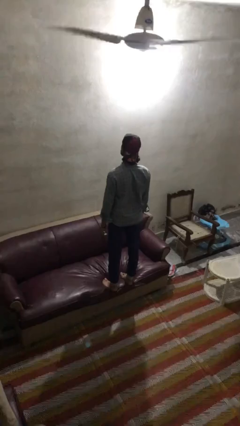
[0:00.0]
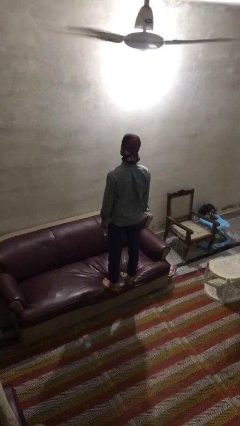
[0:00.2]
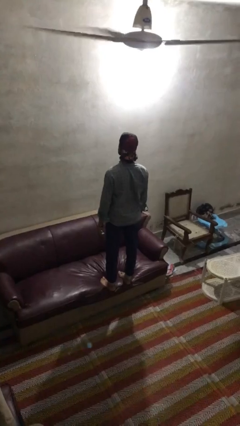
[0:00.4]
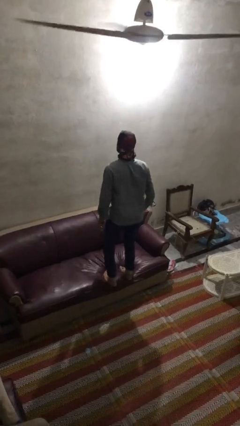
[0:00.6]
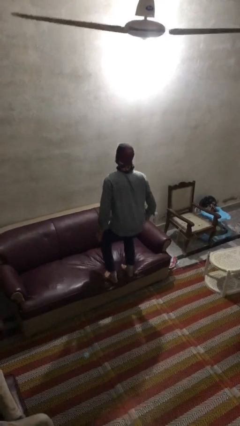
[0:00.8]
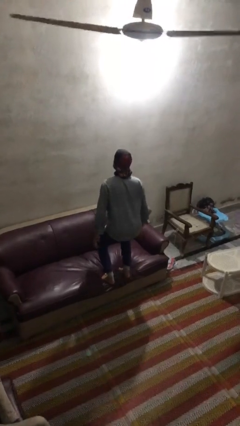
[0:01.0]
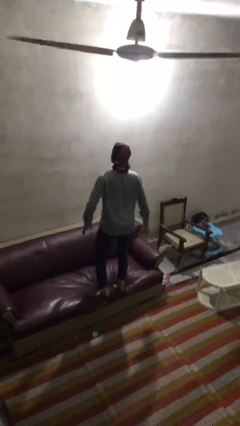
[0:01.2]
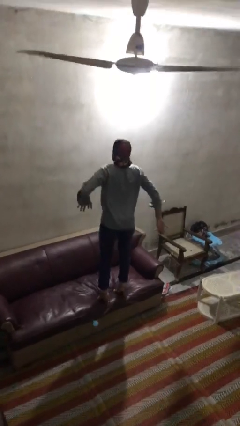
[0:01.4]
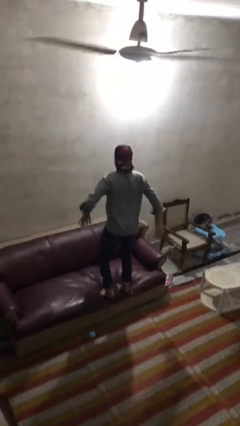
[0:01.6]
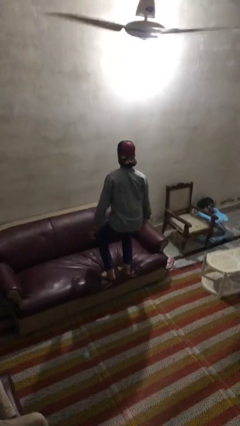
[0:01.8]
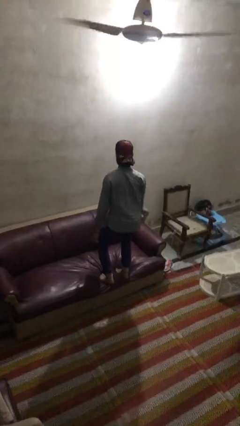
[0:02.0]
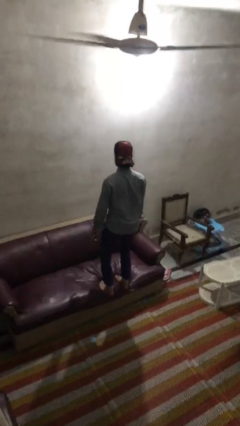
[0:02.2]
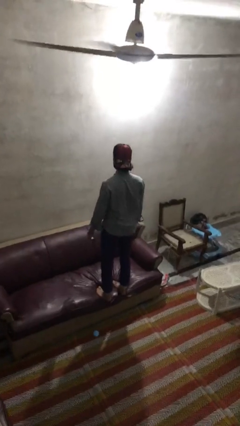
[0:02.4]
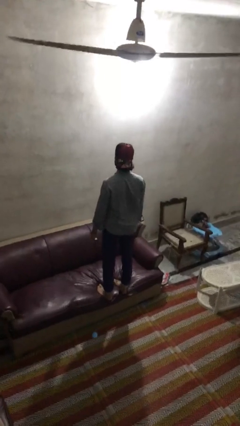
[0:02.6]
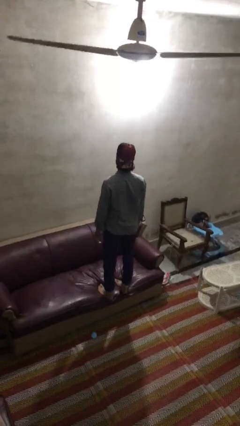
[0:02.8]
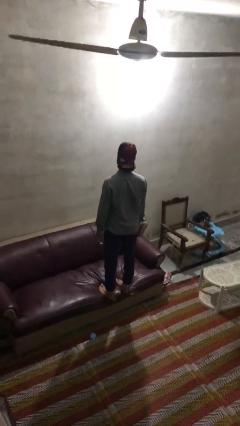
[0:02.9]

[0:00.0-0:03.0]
person jumps on couch

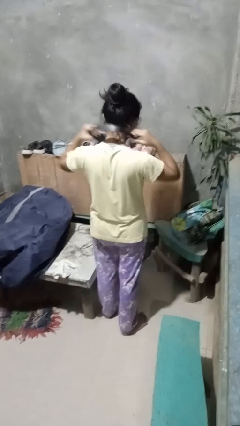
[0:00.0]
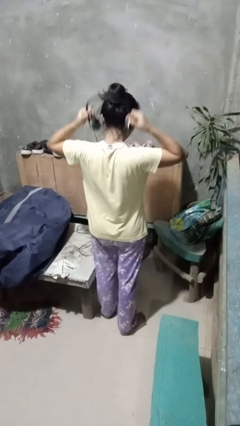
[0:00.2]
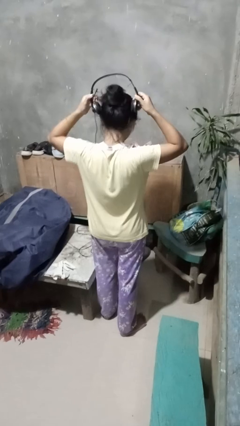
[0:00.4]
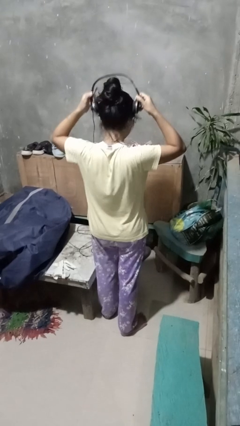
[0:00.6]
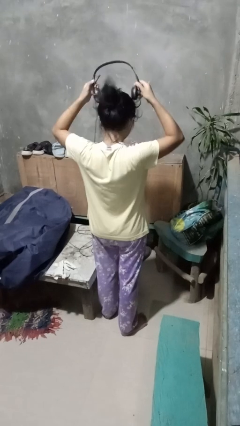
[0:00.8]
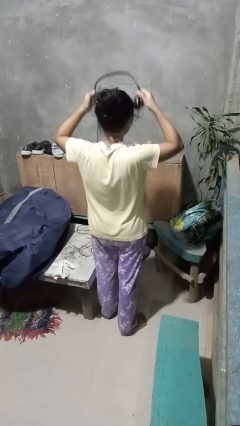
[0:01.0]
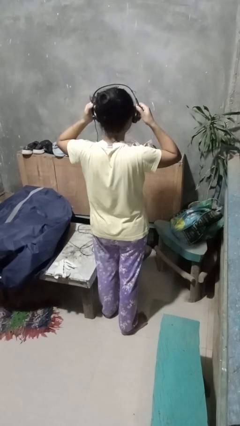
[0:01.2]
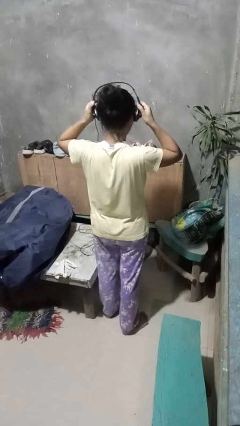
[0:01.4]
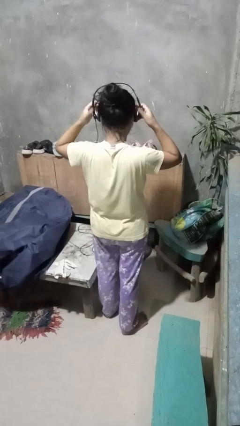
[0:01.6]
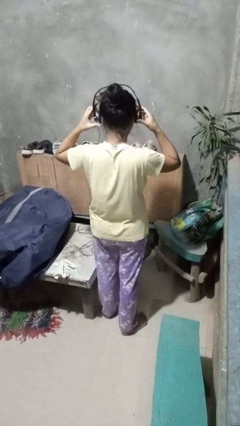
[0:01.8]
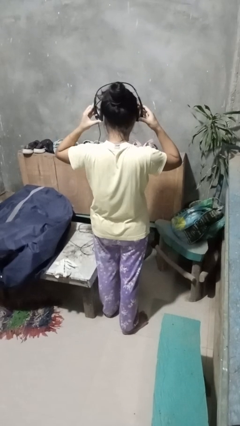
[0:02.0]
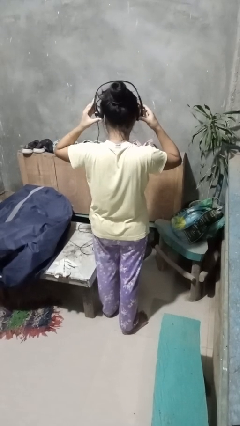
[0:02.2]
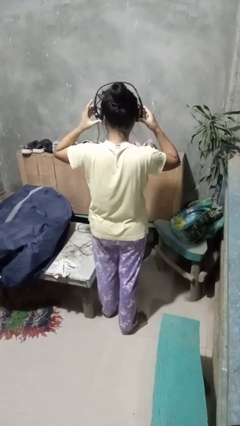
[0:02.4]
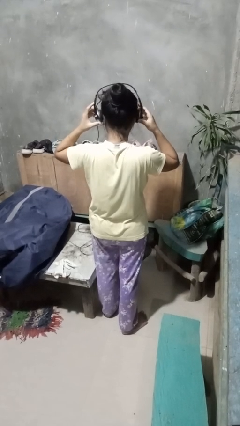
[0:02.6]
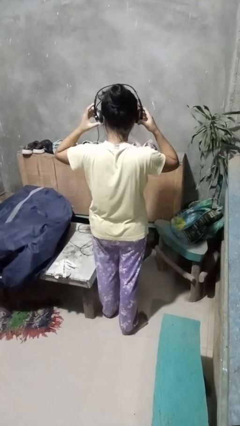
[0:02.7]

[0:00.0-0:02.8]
person puts on headphones

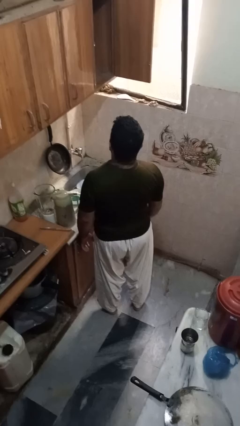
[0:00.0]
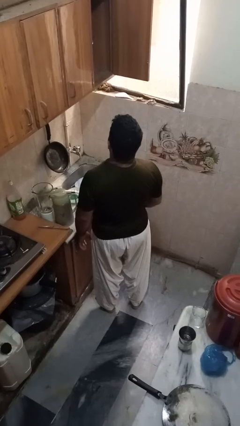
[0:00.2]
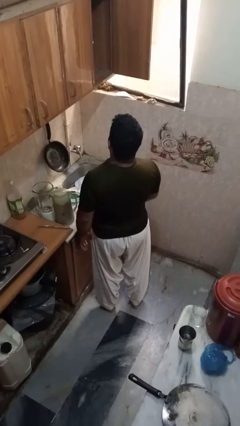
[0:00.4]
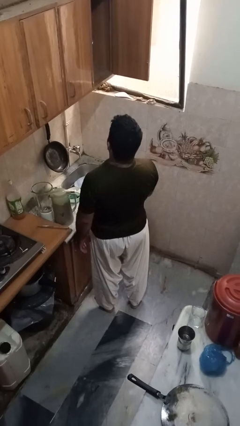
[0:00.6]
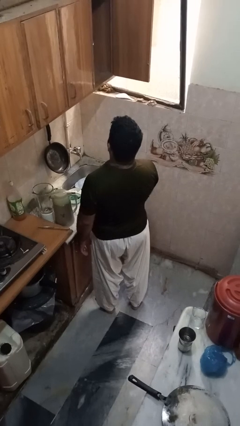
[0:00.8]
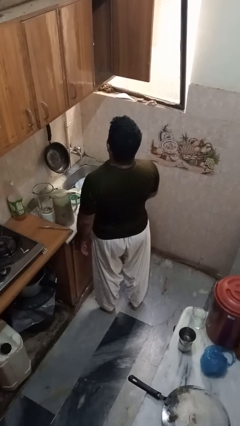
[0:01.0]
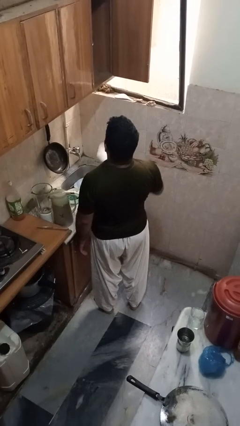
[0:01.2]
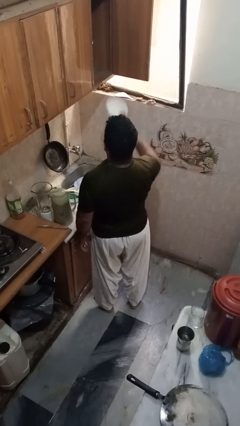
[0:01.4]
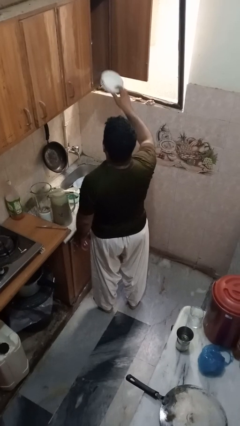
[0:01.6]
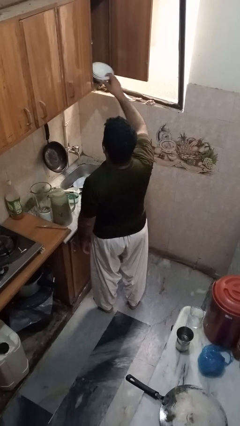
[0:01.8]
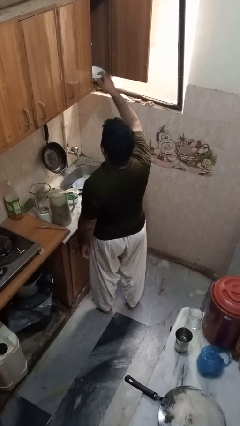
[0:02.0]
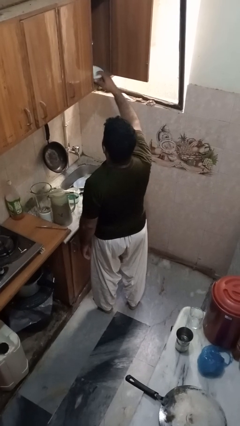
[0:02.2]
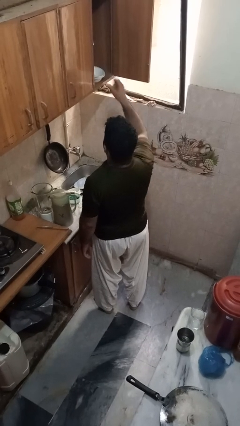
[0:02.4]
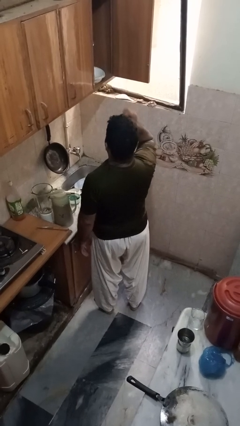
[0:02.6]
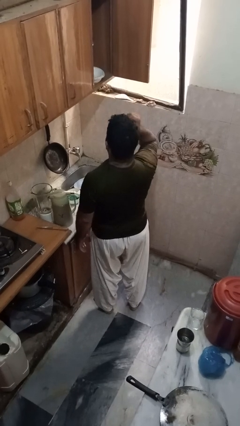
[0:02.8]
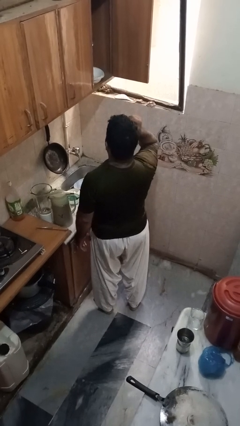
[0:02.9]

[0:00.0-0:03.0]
person puts object in cabinet

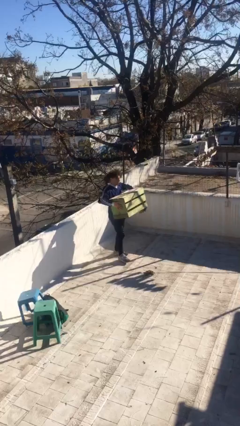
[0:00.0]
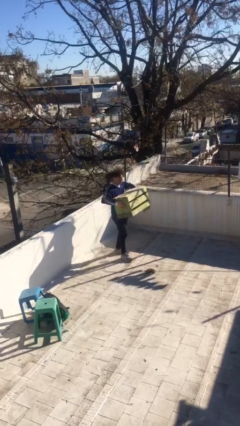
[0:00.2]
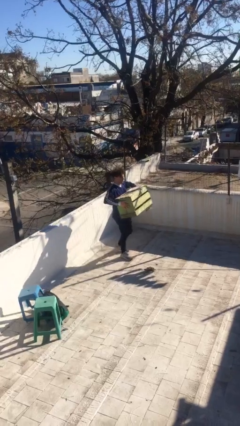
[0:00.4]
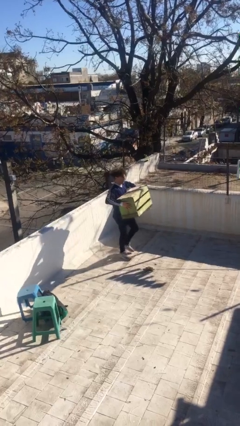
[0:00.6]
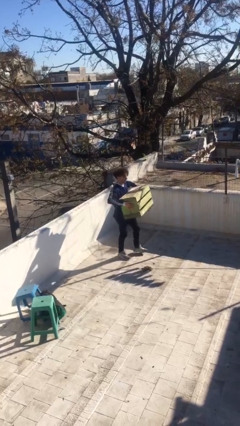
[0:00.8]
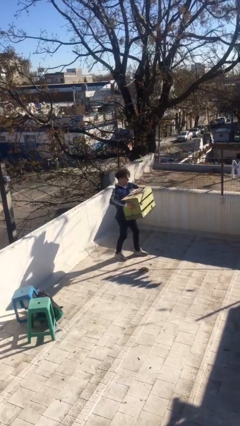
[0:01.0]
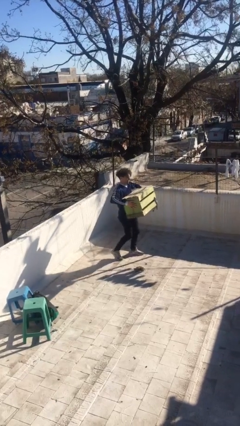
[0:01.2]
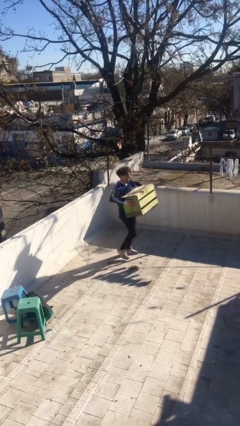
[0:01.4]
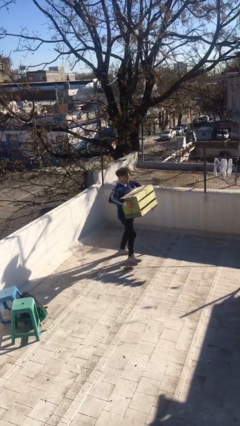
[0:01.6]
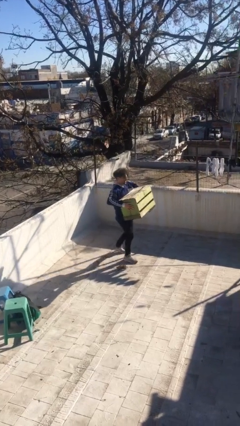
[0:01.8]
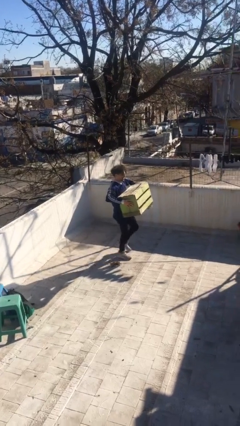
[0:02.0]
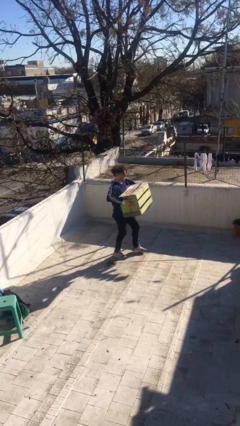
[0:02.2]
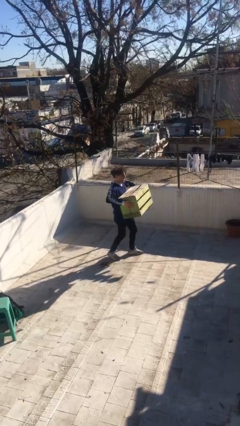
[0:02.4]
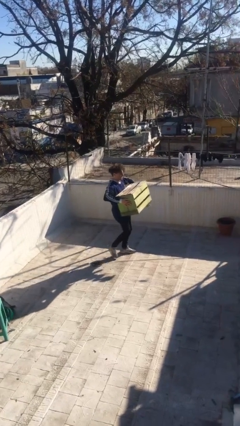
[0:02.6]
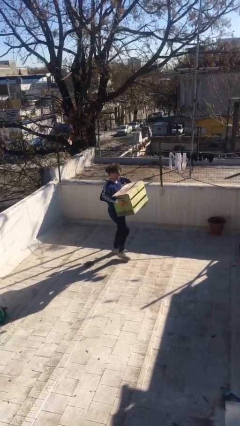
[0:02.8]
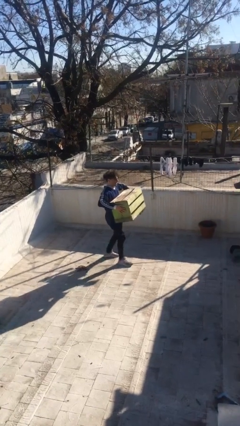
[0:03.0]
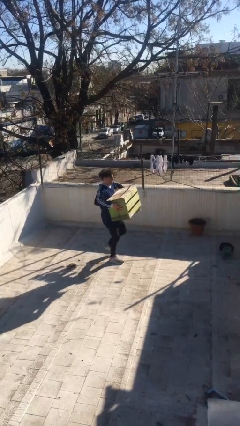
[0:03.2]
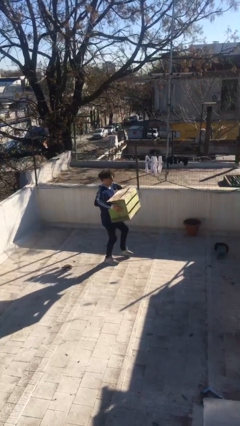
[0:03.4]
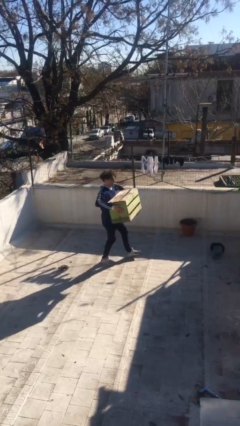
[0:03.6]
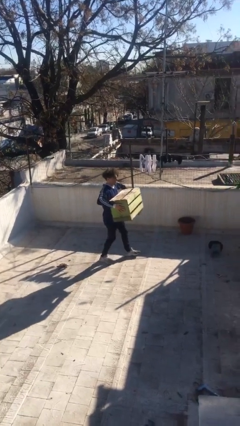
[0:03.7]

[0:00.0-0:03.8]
person carries heavy object

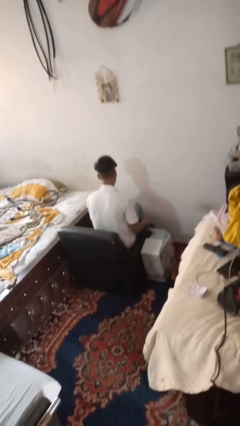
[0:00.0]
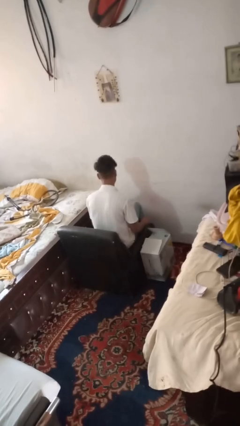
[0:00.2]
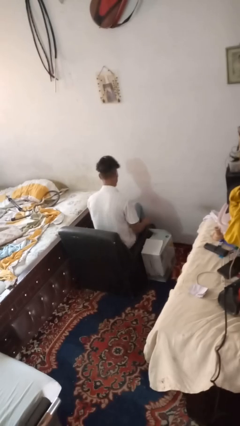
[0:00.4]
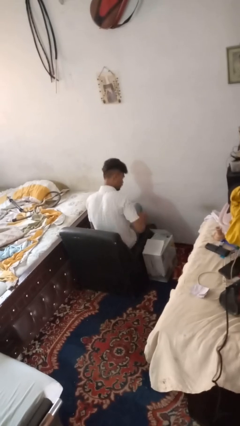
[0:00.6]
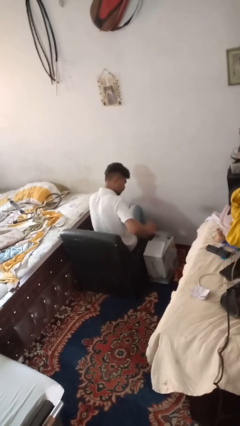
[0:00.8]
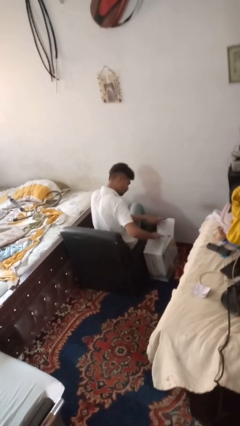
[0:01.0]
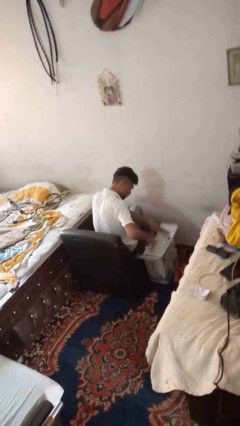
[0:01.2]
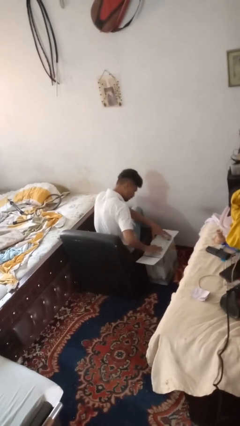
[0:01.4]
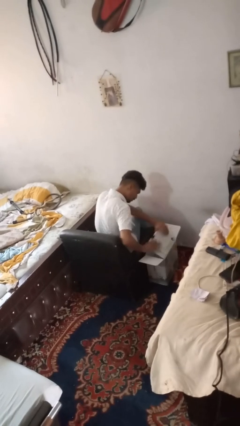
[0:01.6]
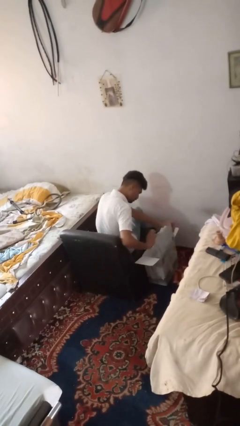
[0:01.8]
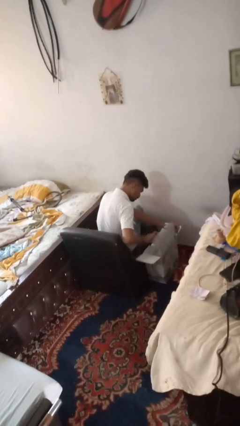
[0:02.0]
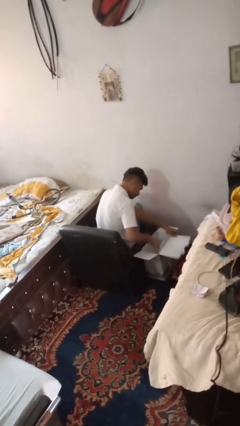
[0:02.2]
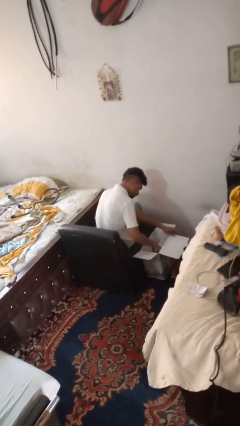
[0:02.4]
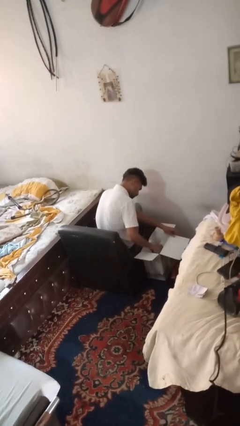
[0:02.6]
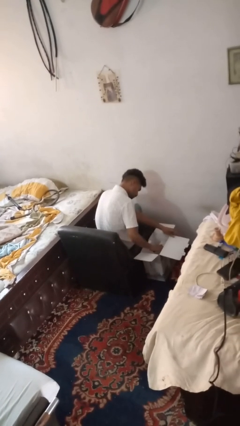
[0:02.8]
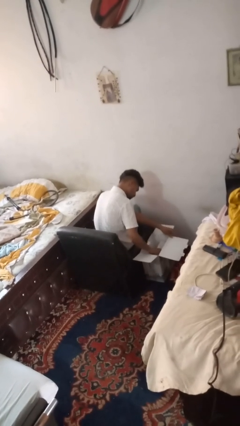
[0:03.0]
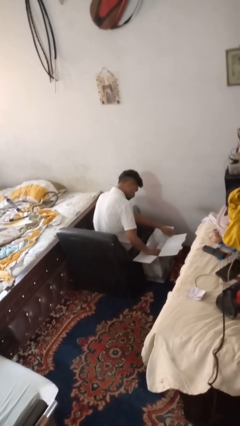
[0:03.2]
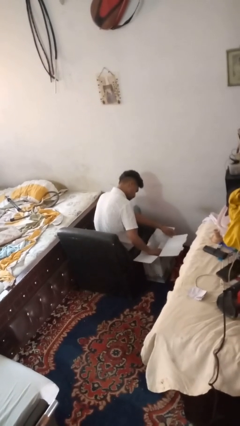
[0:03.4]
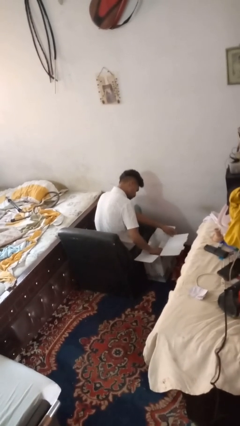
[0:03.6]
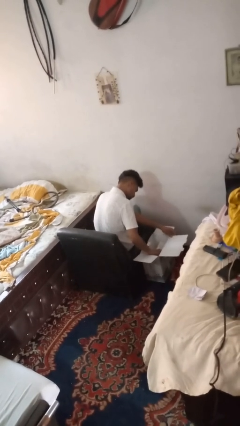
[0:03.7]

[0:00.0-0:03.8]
person searches in box

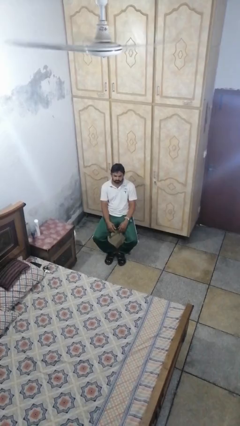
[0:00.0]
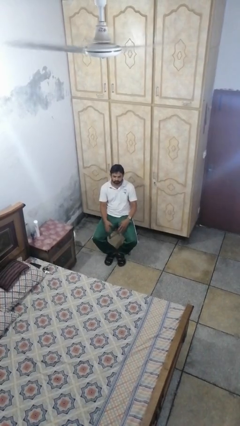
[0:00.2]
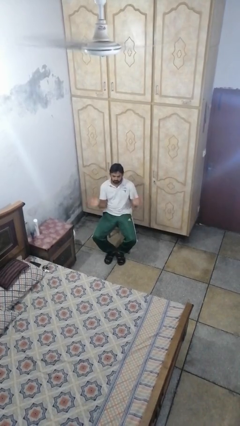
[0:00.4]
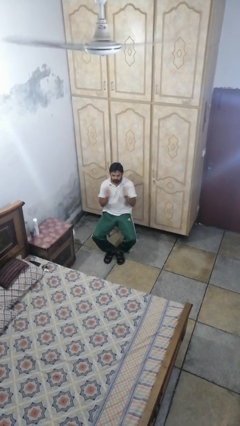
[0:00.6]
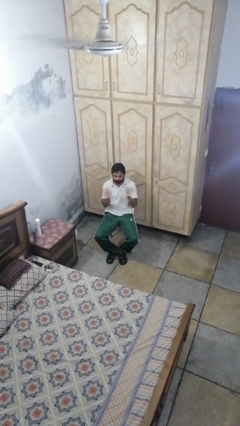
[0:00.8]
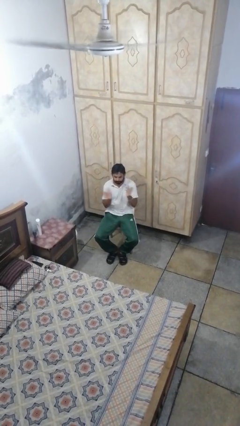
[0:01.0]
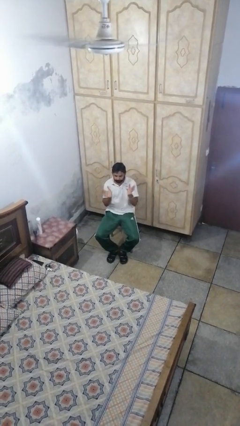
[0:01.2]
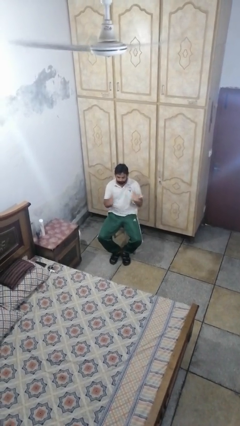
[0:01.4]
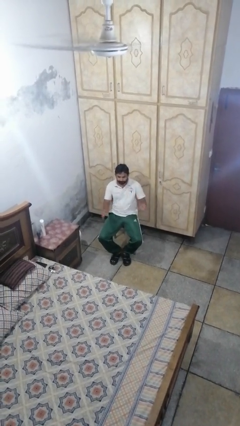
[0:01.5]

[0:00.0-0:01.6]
person claps hands
